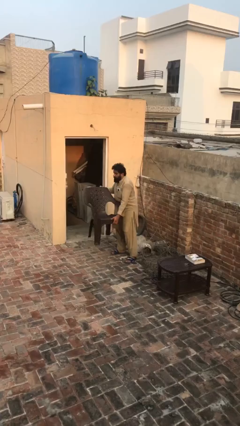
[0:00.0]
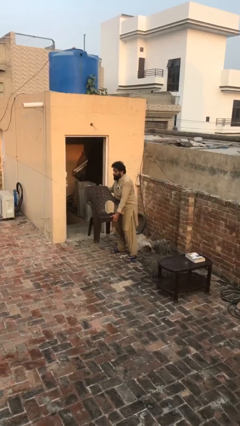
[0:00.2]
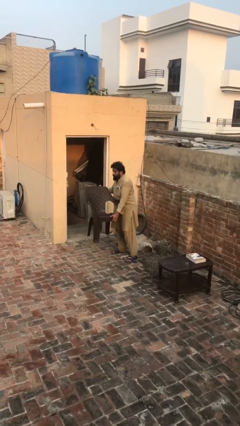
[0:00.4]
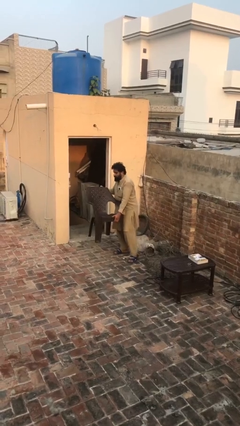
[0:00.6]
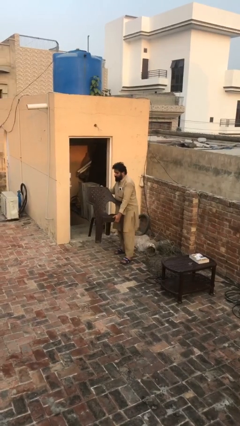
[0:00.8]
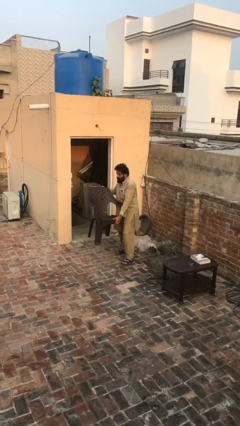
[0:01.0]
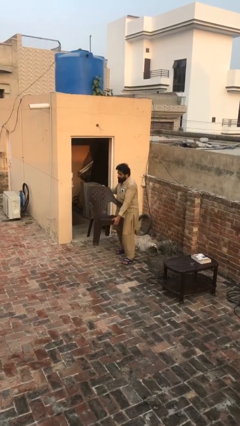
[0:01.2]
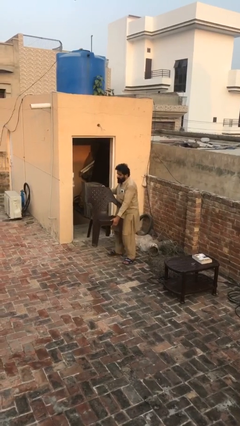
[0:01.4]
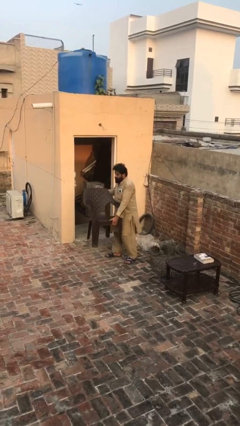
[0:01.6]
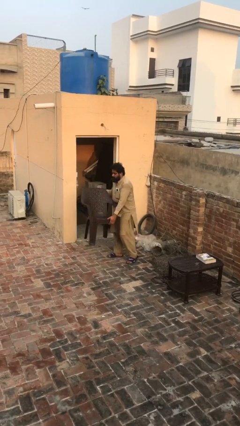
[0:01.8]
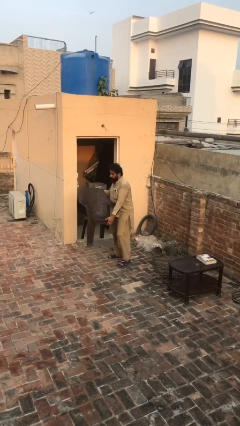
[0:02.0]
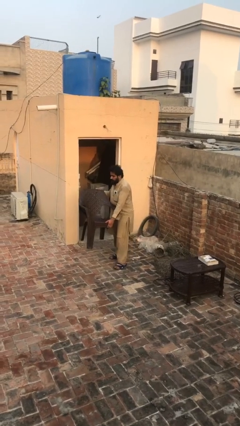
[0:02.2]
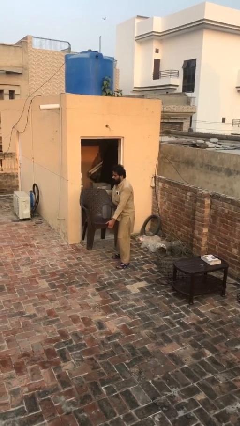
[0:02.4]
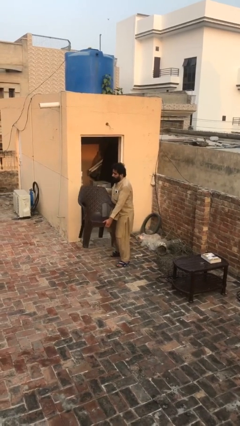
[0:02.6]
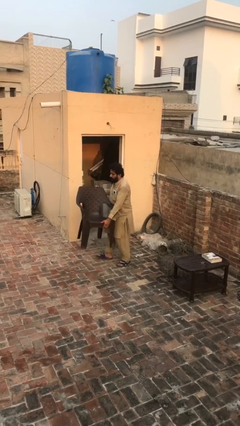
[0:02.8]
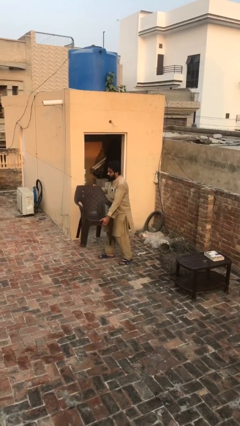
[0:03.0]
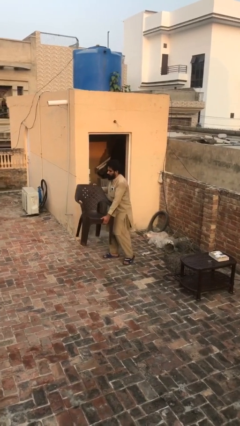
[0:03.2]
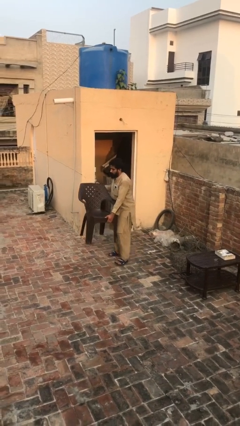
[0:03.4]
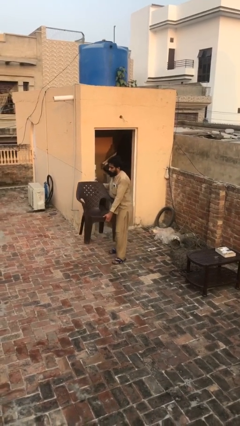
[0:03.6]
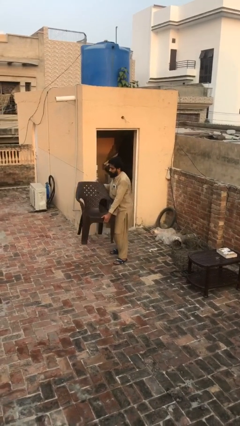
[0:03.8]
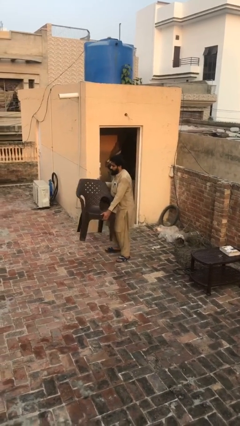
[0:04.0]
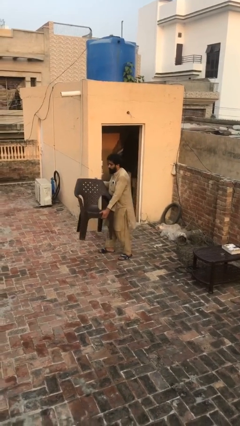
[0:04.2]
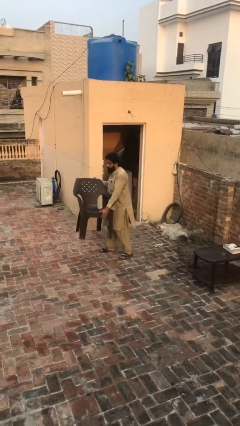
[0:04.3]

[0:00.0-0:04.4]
person carries heavy object

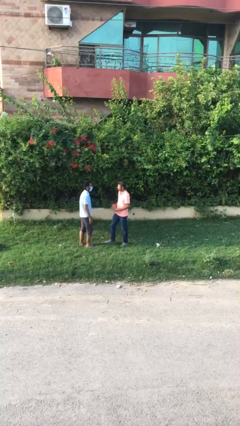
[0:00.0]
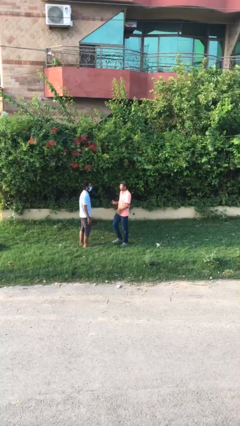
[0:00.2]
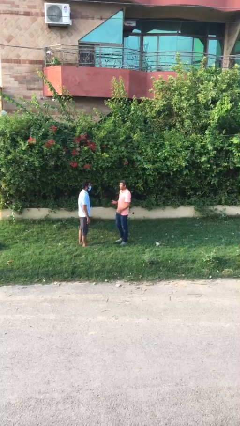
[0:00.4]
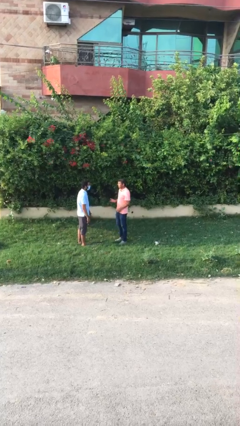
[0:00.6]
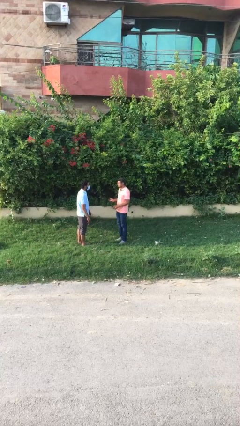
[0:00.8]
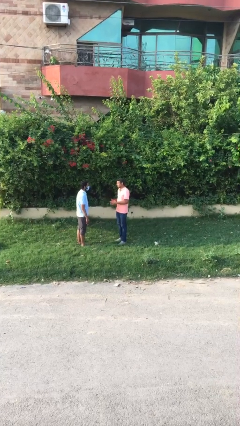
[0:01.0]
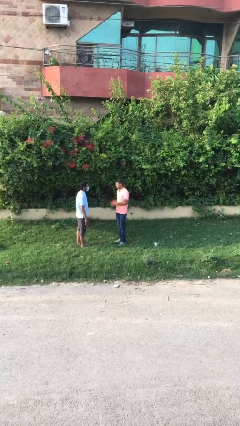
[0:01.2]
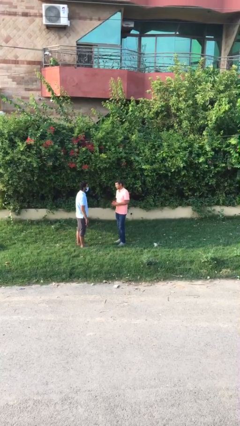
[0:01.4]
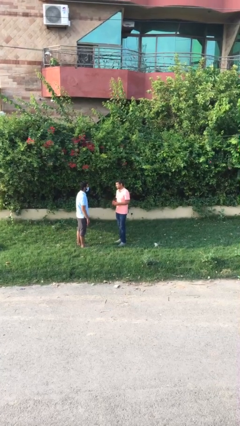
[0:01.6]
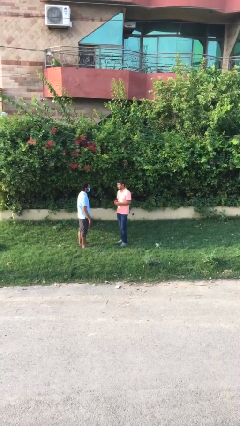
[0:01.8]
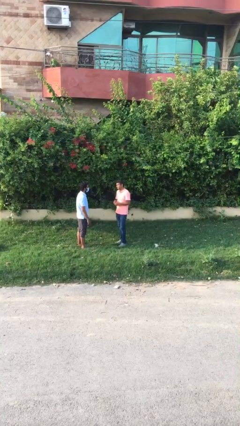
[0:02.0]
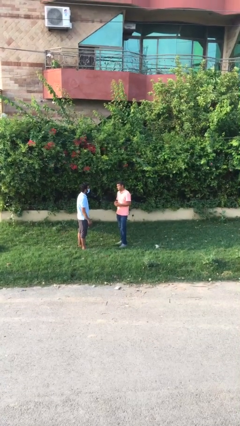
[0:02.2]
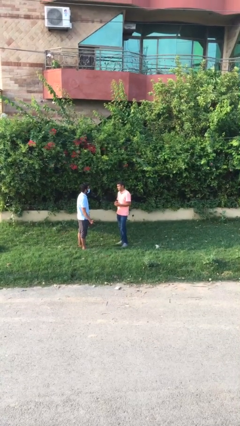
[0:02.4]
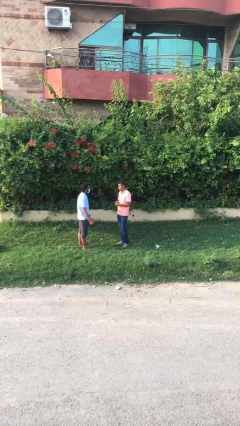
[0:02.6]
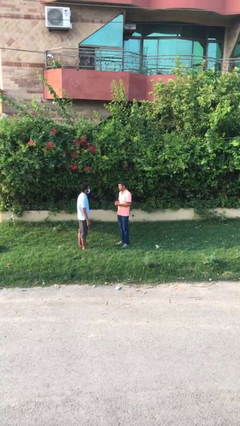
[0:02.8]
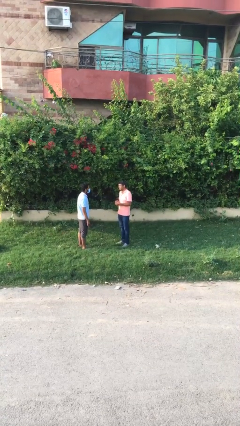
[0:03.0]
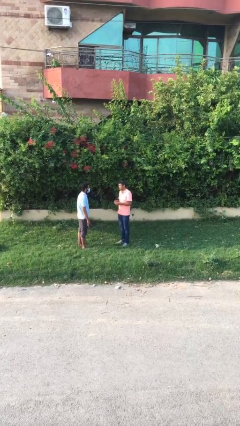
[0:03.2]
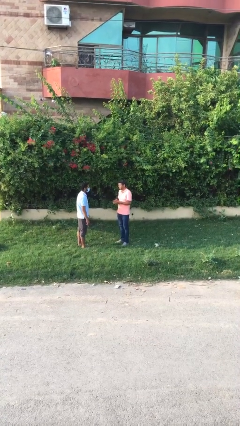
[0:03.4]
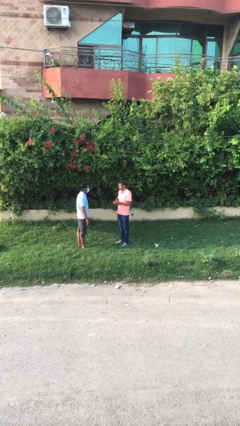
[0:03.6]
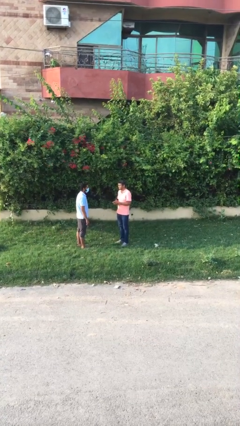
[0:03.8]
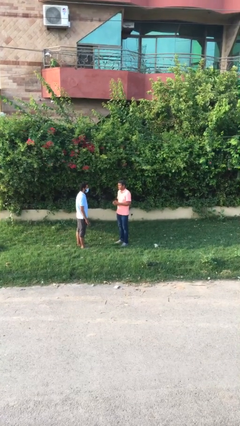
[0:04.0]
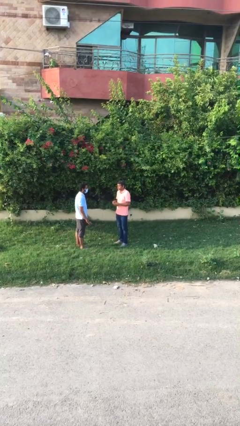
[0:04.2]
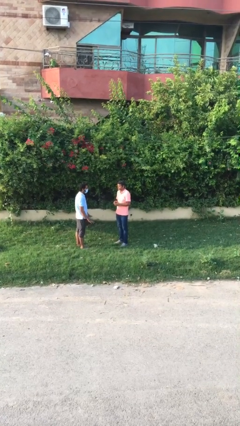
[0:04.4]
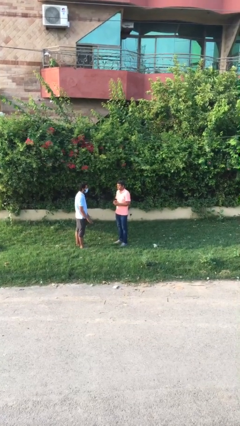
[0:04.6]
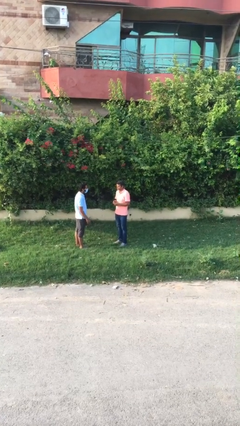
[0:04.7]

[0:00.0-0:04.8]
person talks to person

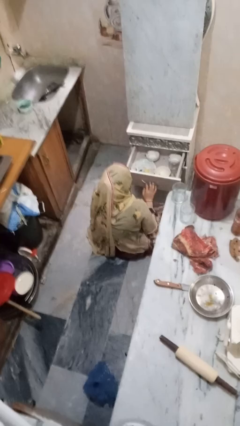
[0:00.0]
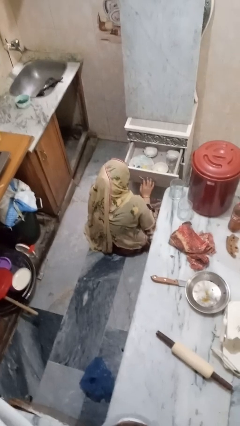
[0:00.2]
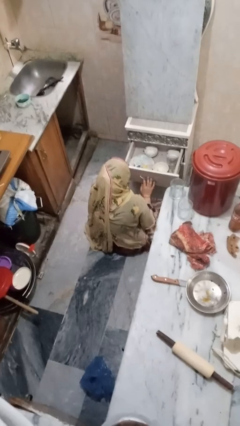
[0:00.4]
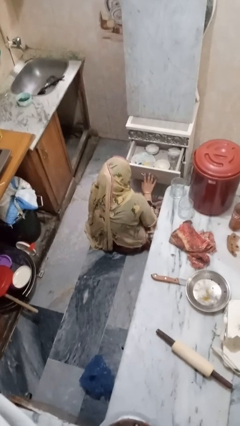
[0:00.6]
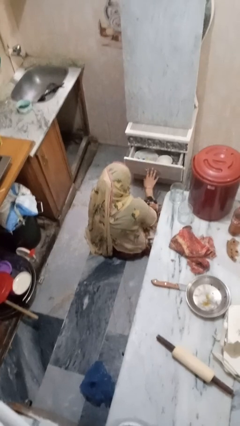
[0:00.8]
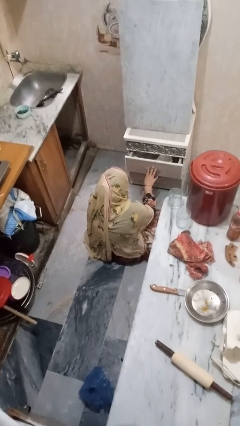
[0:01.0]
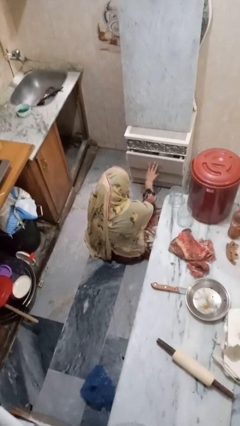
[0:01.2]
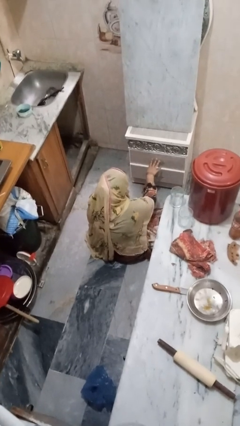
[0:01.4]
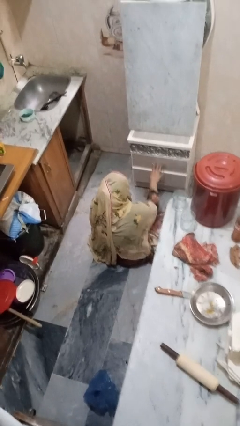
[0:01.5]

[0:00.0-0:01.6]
person closes kitchen drawer

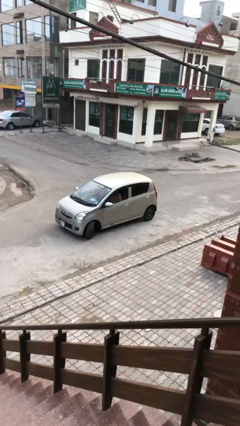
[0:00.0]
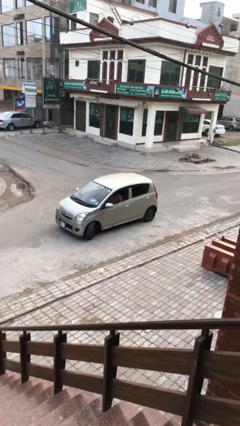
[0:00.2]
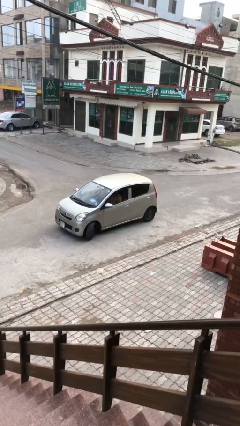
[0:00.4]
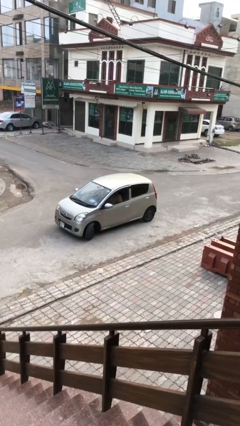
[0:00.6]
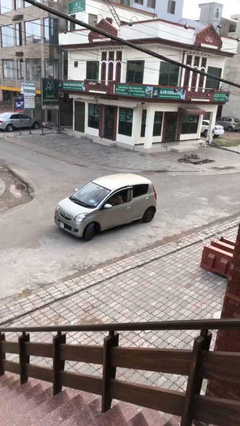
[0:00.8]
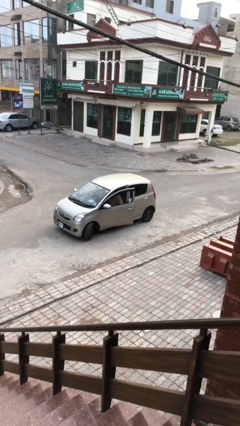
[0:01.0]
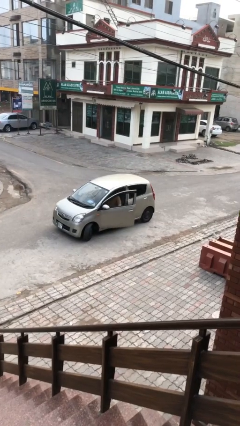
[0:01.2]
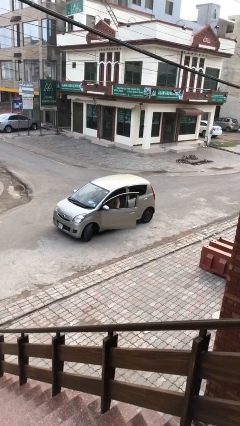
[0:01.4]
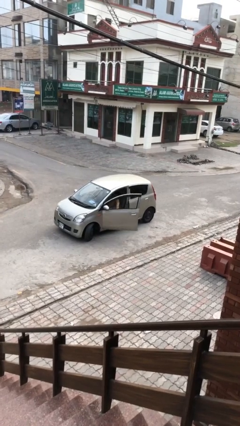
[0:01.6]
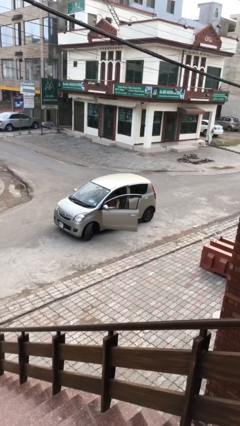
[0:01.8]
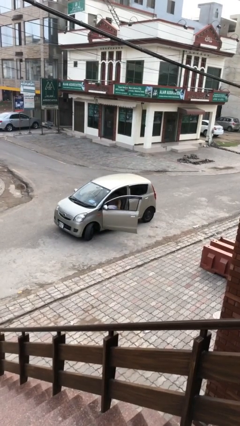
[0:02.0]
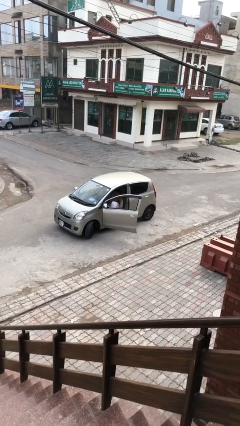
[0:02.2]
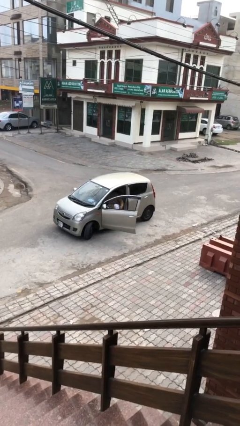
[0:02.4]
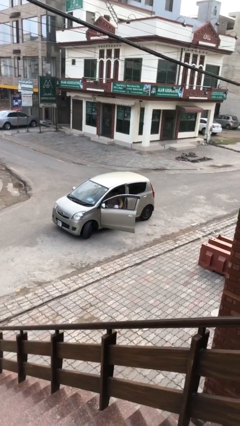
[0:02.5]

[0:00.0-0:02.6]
person opens car door

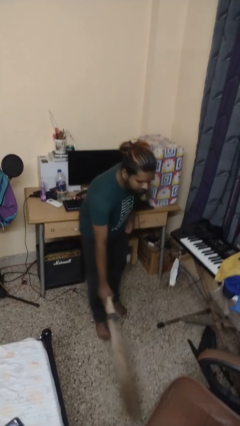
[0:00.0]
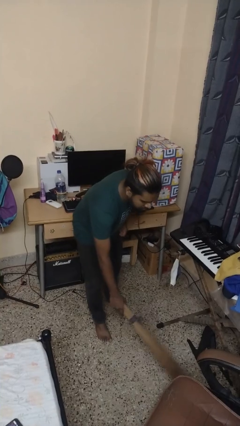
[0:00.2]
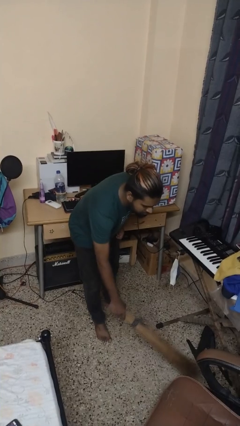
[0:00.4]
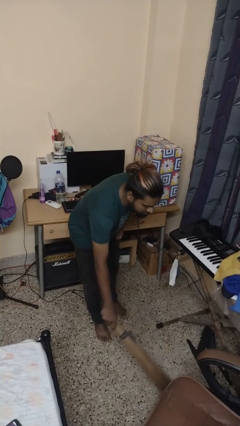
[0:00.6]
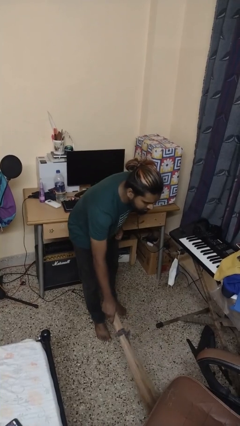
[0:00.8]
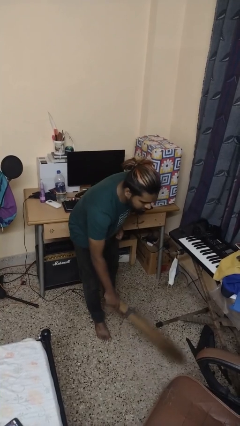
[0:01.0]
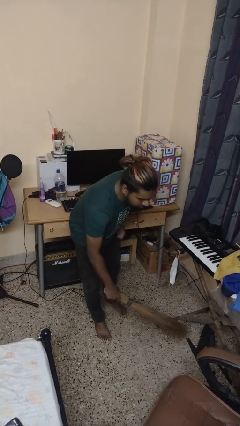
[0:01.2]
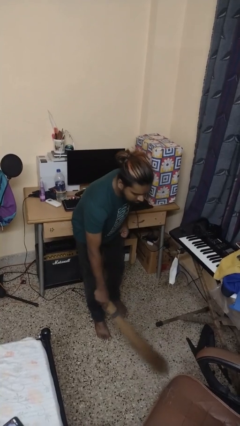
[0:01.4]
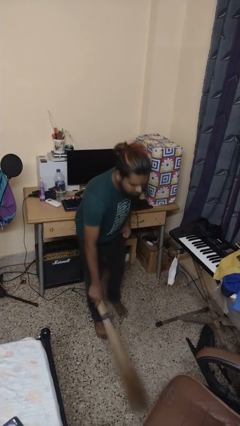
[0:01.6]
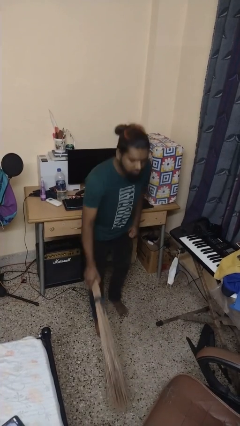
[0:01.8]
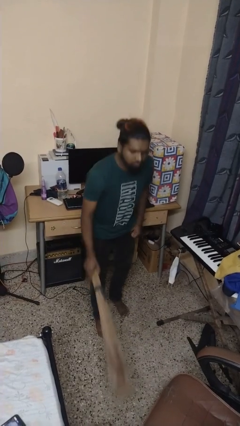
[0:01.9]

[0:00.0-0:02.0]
person sweeps floor

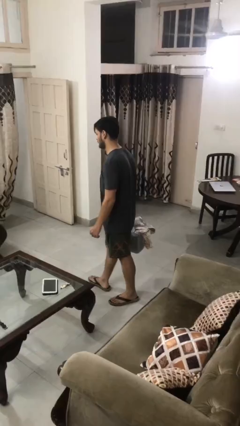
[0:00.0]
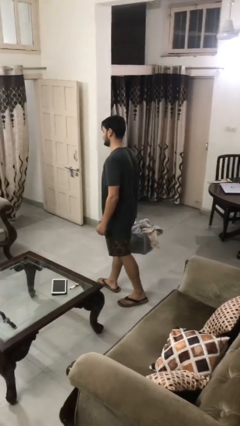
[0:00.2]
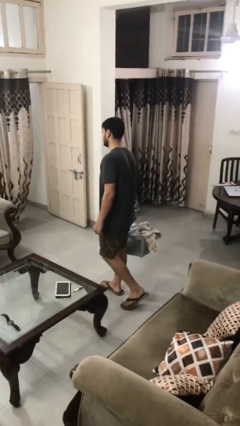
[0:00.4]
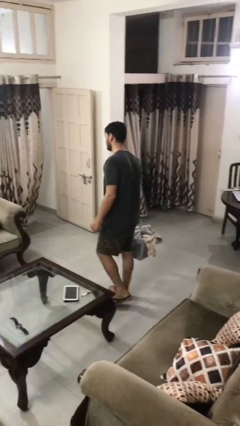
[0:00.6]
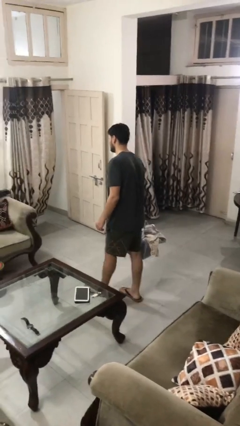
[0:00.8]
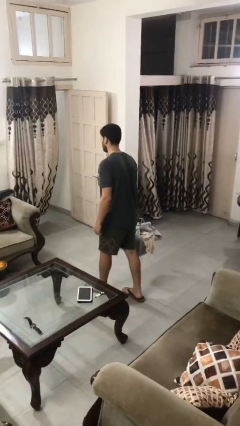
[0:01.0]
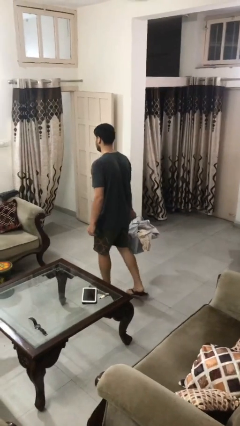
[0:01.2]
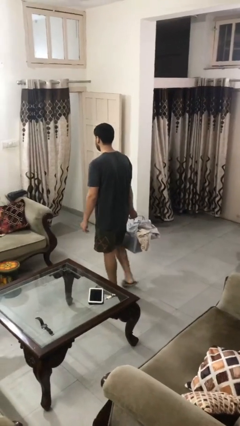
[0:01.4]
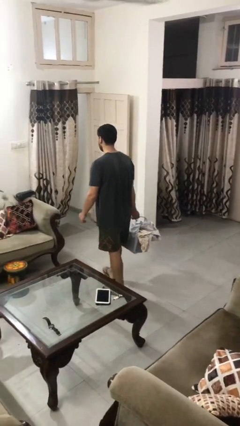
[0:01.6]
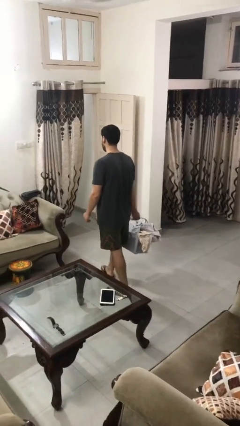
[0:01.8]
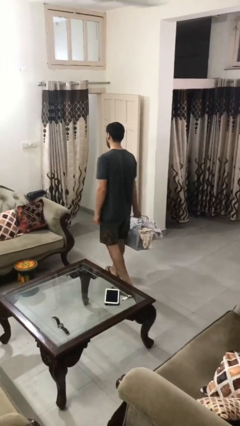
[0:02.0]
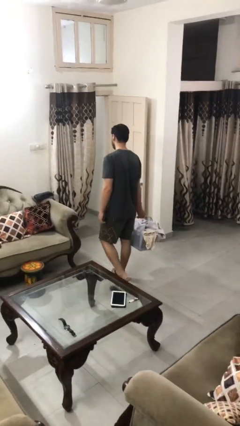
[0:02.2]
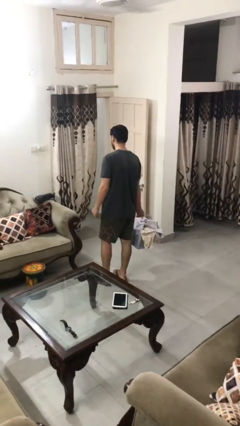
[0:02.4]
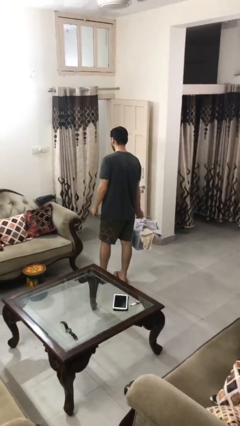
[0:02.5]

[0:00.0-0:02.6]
person carries laundry basket
